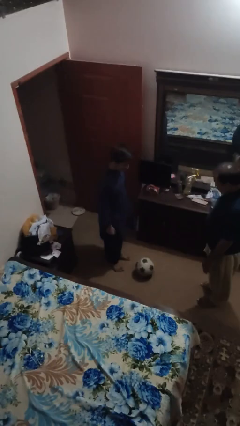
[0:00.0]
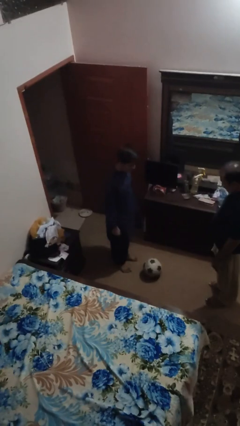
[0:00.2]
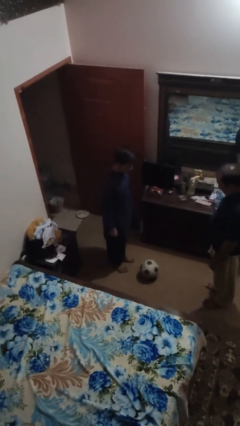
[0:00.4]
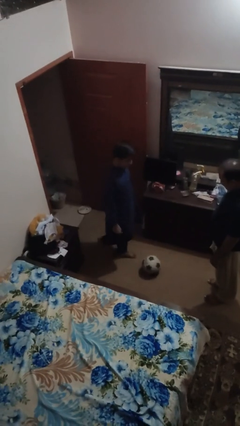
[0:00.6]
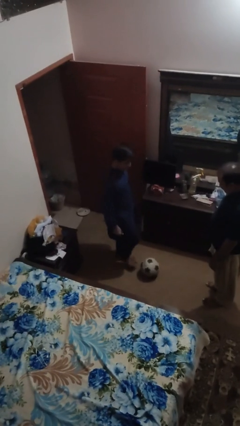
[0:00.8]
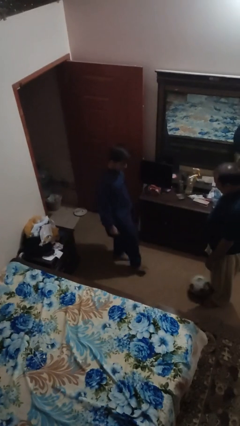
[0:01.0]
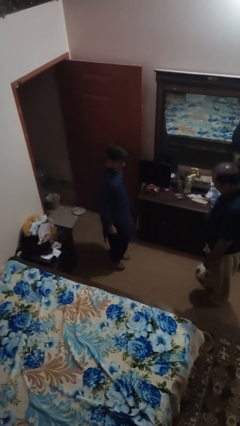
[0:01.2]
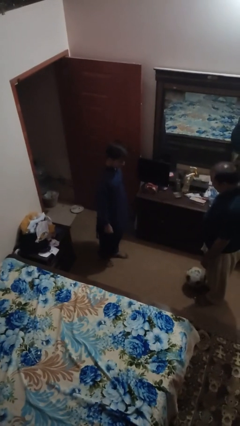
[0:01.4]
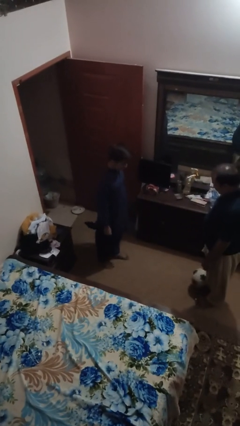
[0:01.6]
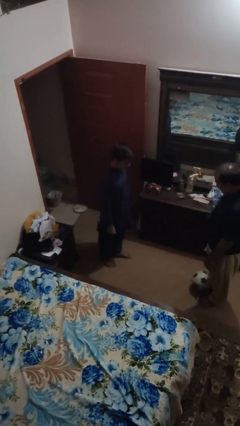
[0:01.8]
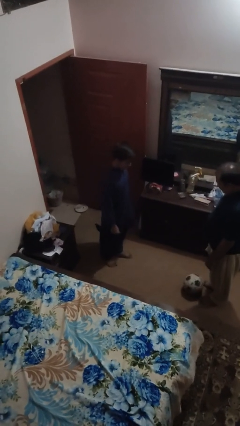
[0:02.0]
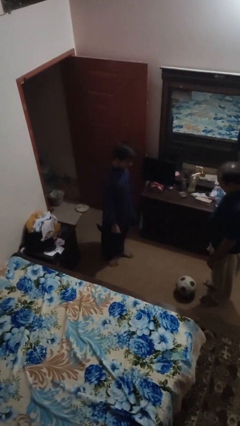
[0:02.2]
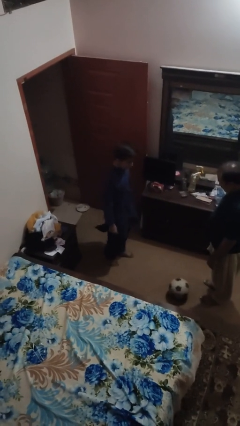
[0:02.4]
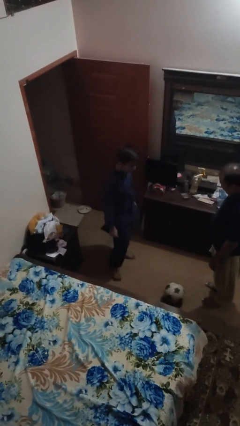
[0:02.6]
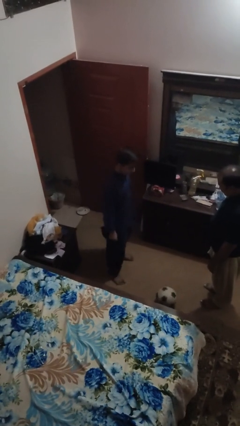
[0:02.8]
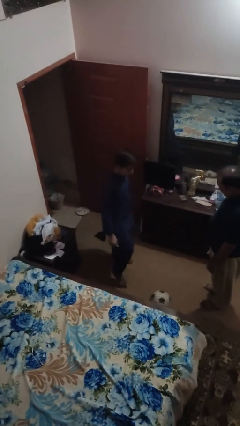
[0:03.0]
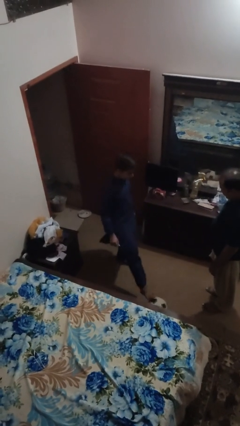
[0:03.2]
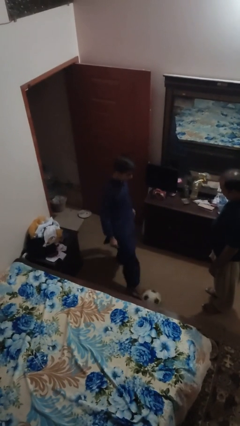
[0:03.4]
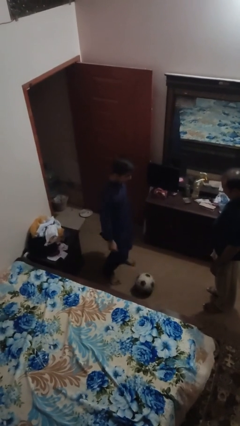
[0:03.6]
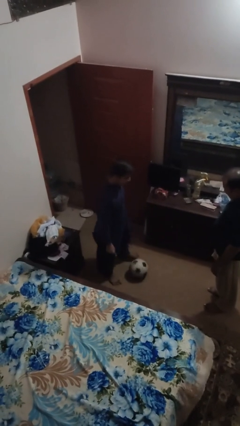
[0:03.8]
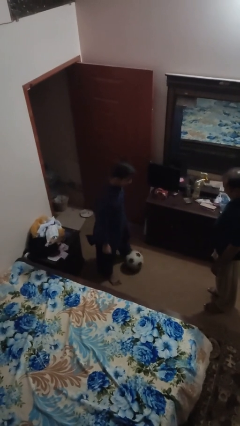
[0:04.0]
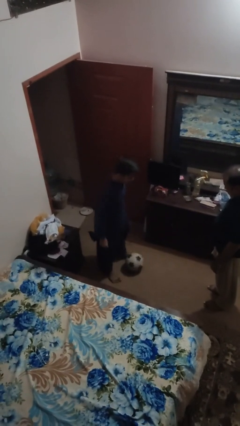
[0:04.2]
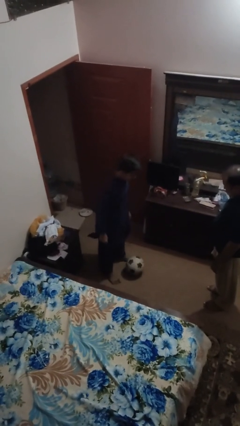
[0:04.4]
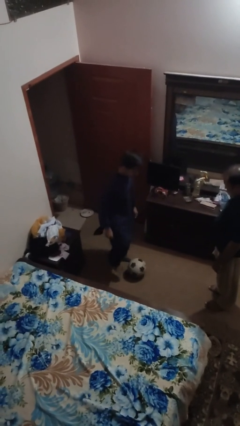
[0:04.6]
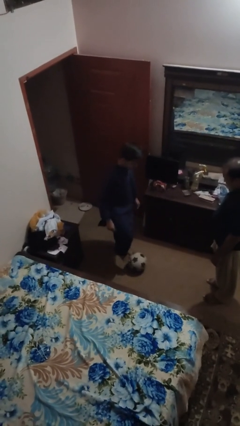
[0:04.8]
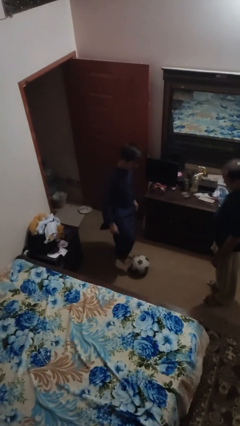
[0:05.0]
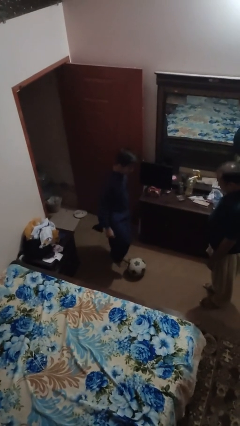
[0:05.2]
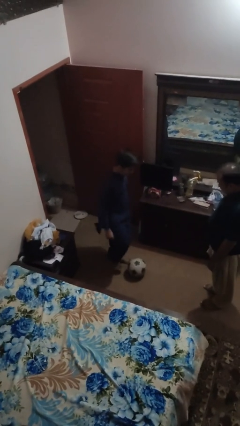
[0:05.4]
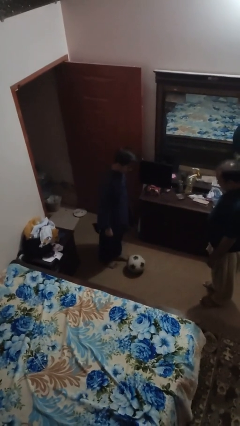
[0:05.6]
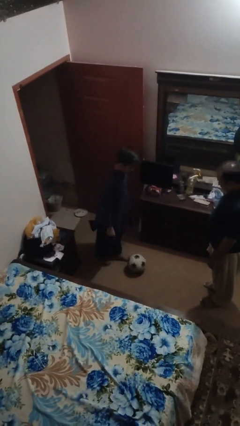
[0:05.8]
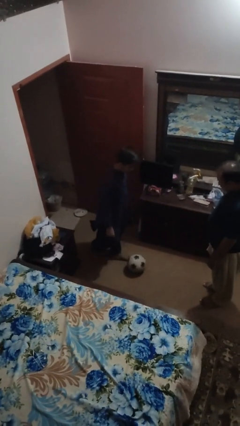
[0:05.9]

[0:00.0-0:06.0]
person kicks object to person

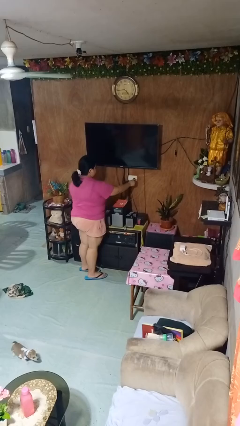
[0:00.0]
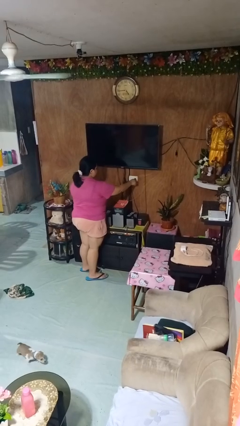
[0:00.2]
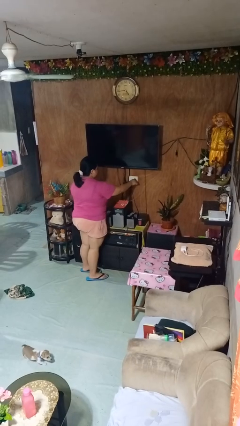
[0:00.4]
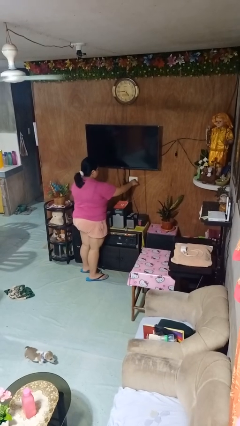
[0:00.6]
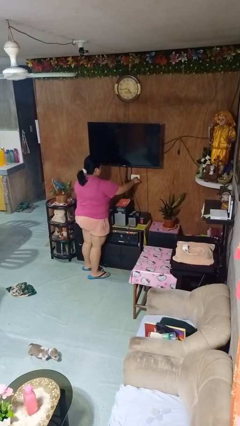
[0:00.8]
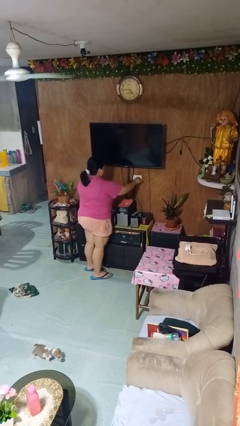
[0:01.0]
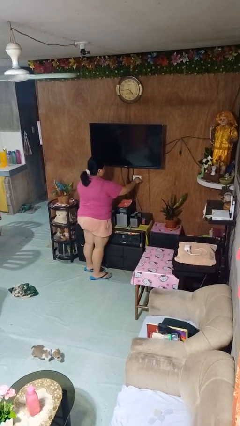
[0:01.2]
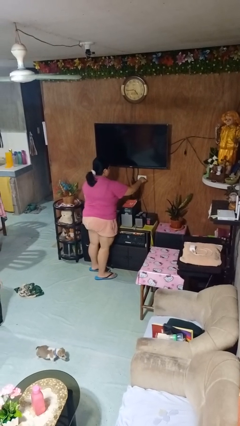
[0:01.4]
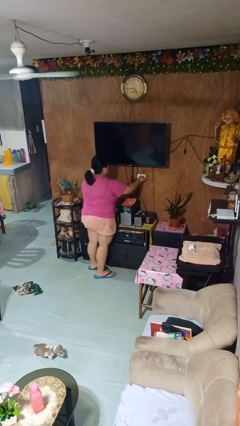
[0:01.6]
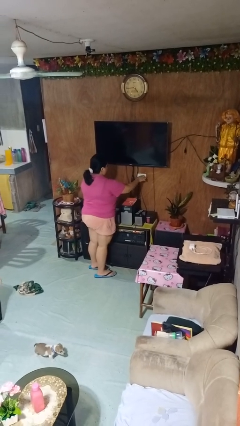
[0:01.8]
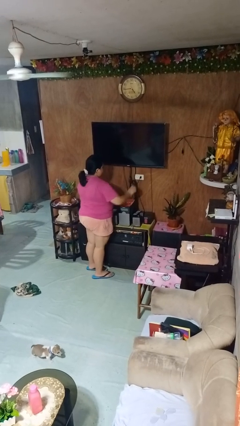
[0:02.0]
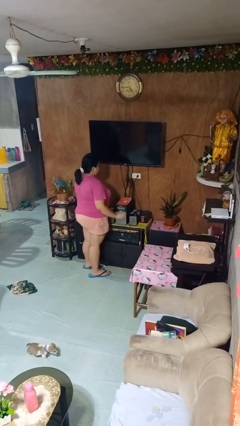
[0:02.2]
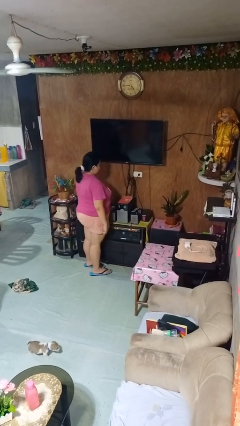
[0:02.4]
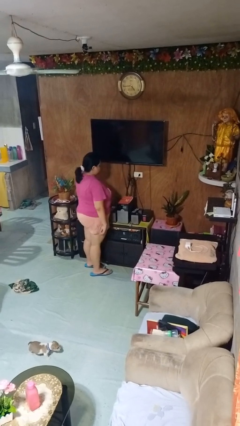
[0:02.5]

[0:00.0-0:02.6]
person plugs into electrical socket

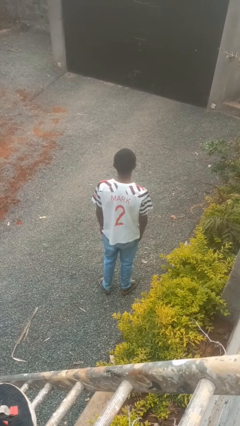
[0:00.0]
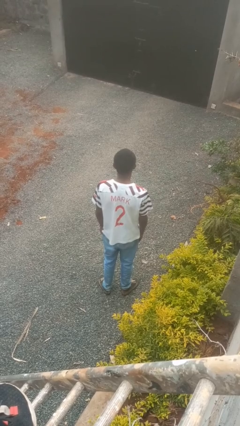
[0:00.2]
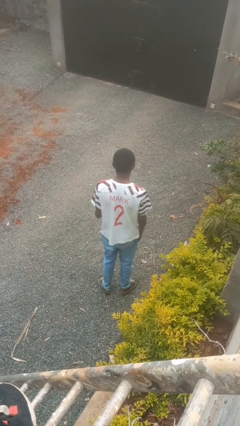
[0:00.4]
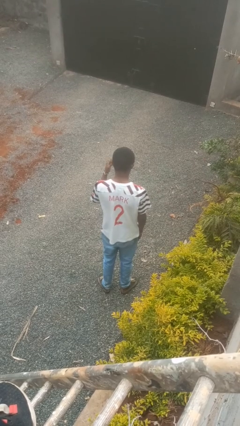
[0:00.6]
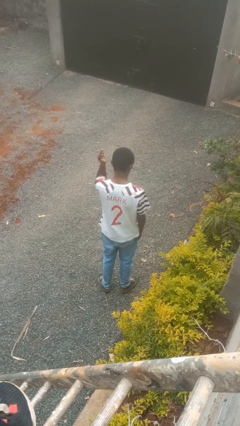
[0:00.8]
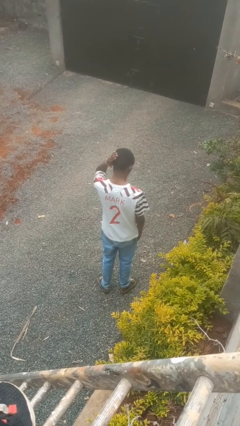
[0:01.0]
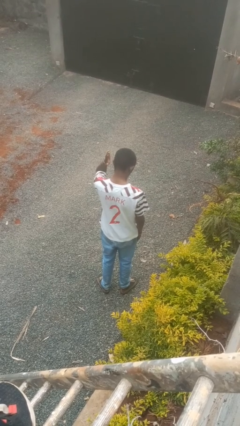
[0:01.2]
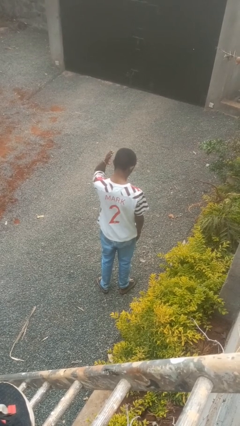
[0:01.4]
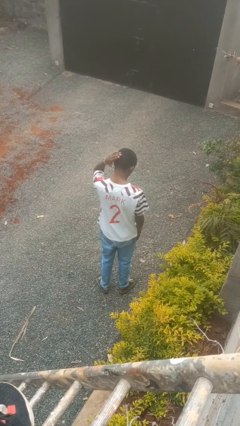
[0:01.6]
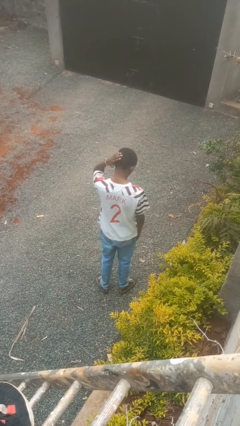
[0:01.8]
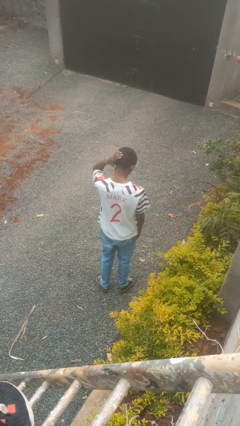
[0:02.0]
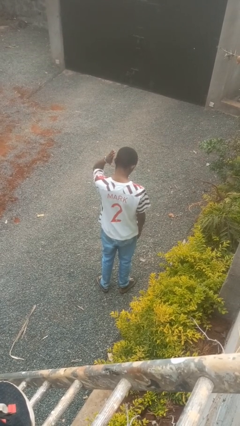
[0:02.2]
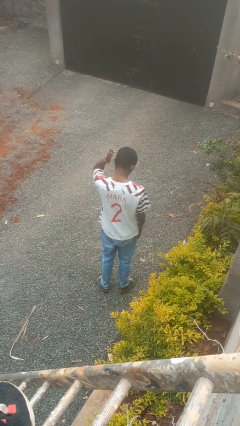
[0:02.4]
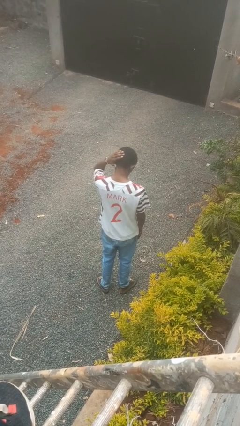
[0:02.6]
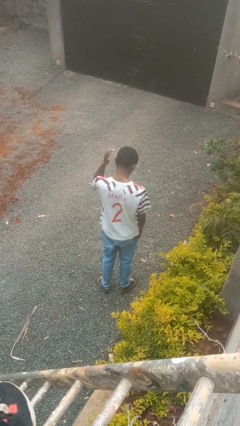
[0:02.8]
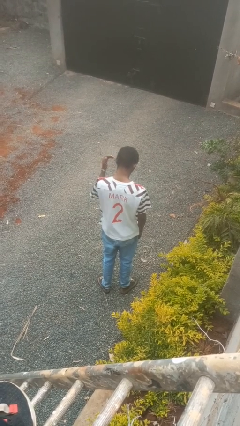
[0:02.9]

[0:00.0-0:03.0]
person pats head

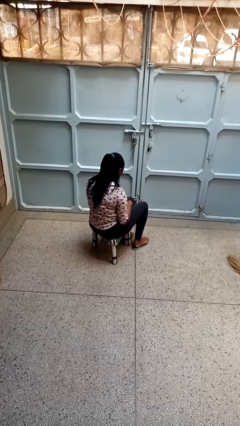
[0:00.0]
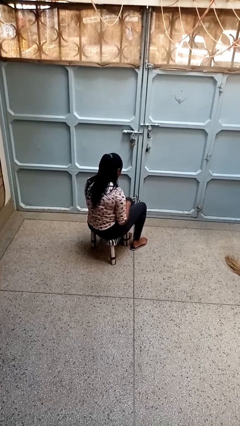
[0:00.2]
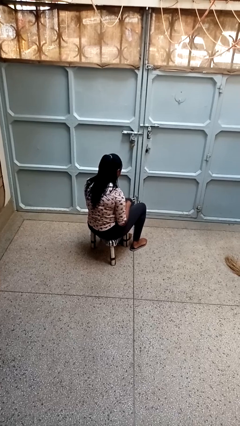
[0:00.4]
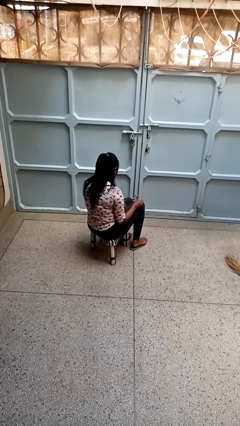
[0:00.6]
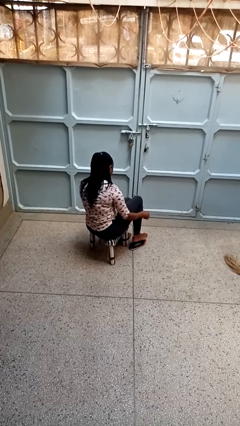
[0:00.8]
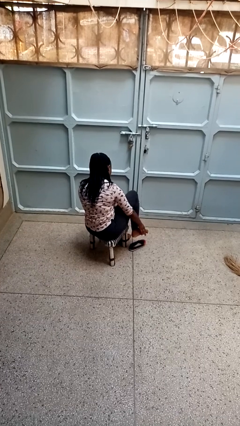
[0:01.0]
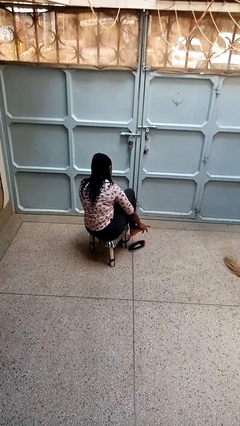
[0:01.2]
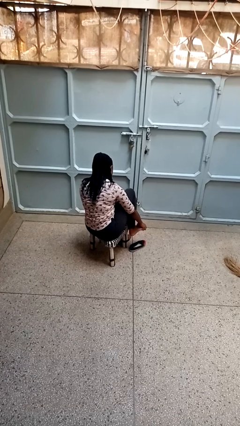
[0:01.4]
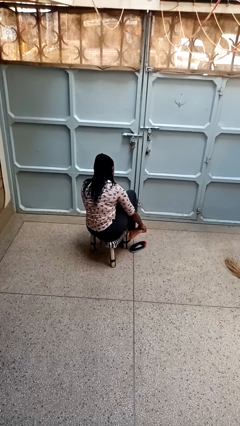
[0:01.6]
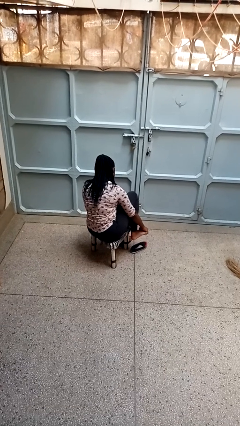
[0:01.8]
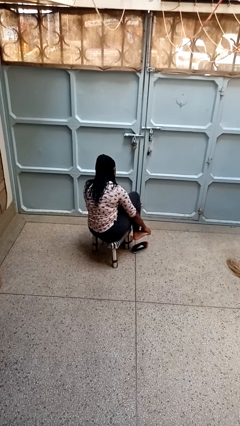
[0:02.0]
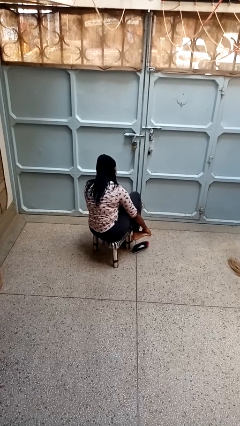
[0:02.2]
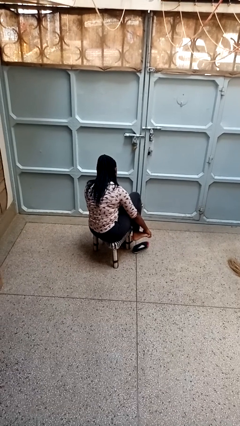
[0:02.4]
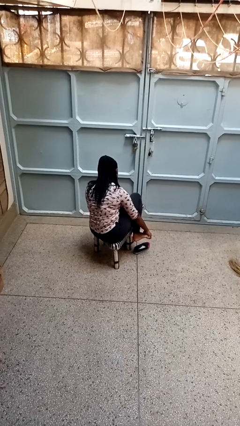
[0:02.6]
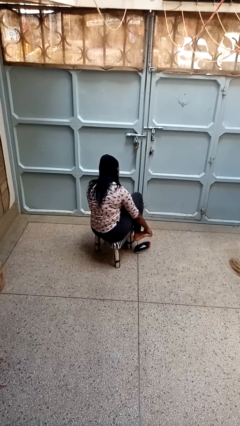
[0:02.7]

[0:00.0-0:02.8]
person rubs foot

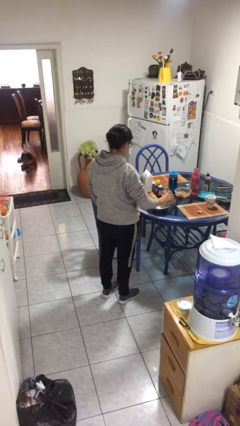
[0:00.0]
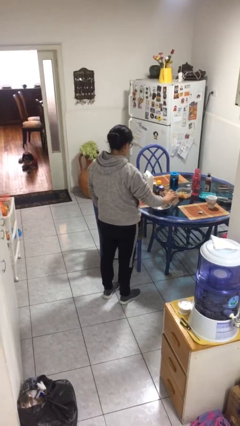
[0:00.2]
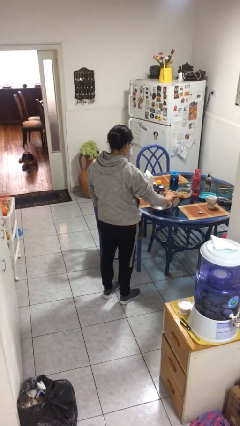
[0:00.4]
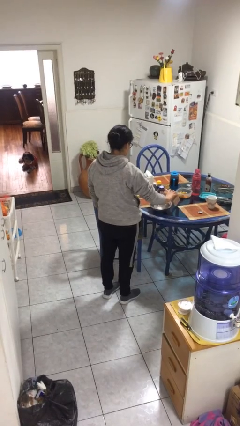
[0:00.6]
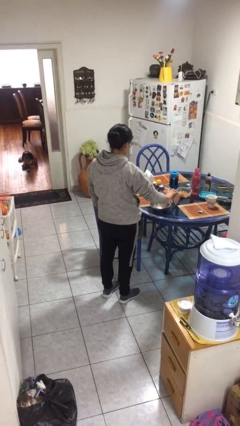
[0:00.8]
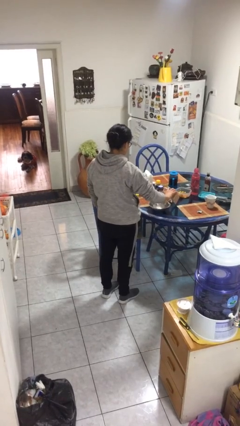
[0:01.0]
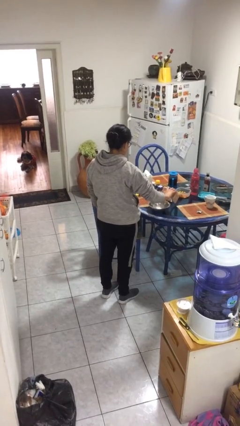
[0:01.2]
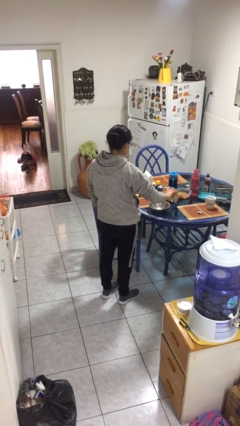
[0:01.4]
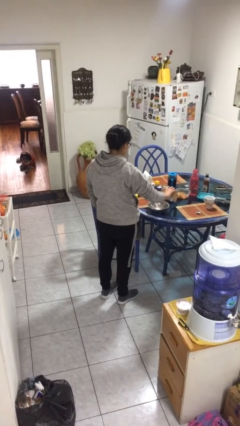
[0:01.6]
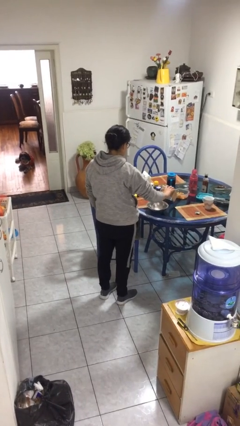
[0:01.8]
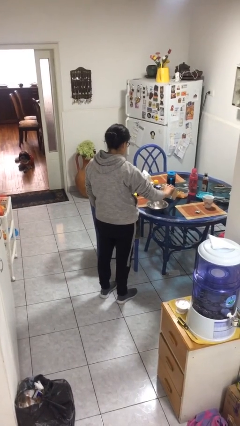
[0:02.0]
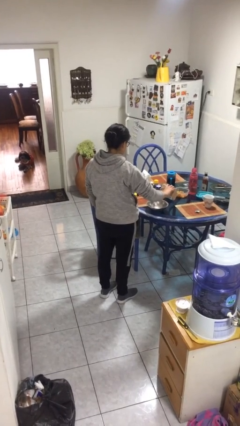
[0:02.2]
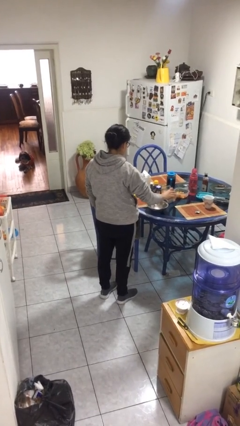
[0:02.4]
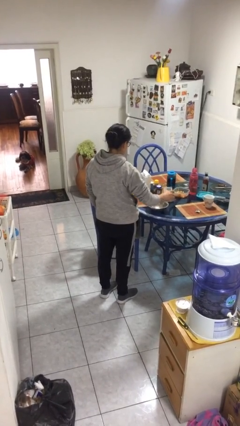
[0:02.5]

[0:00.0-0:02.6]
person pours into bowl

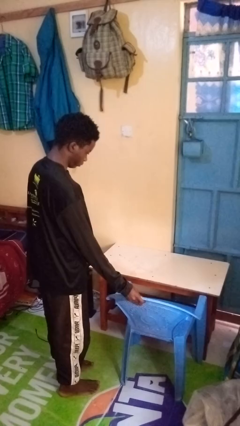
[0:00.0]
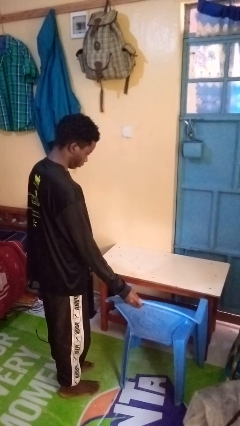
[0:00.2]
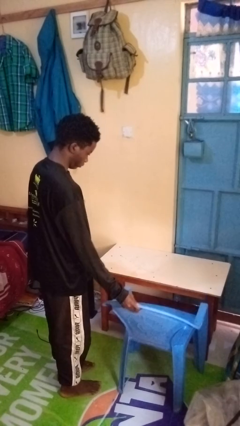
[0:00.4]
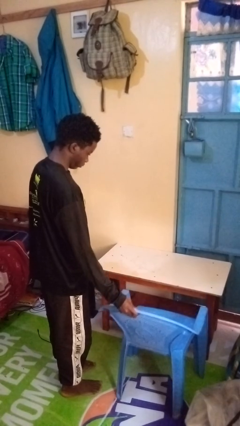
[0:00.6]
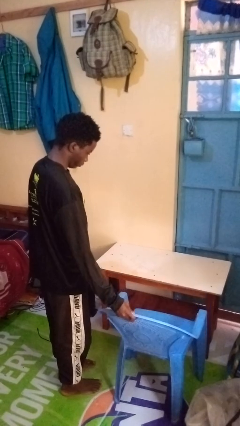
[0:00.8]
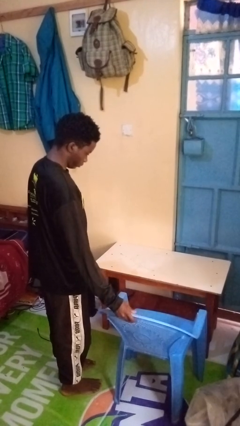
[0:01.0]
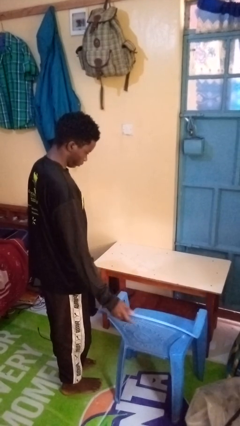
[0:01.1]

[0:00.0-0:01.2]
person pulls out chair
